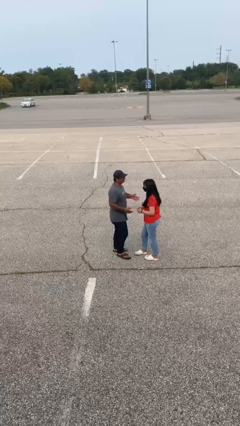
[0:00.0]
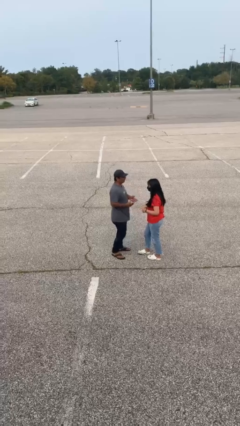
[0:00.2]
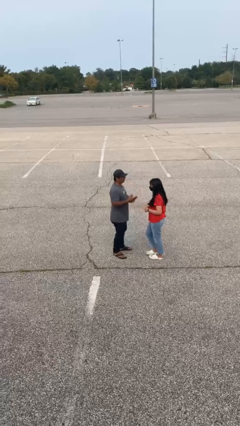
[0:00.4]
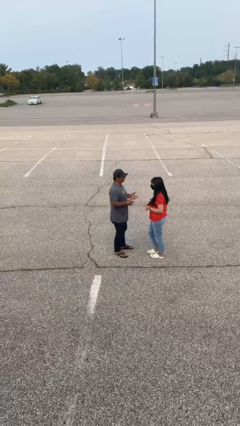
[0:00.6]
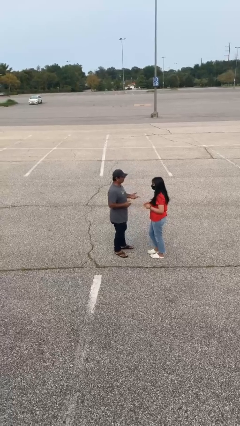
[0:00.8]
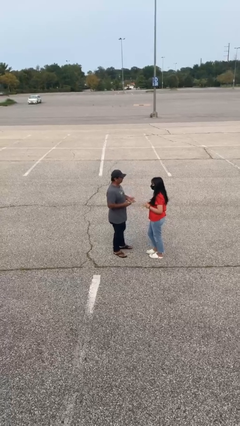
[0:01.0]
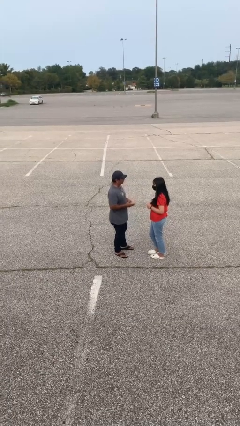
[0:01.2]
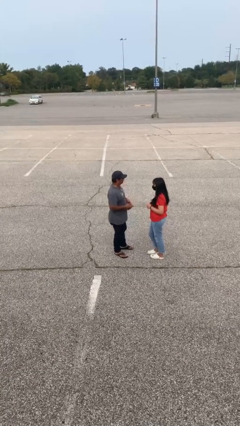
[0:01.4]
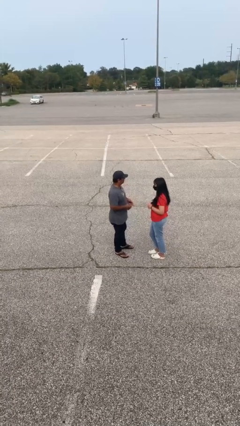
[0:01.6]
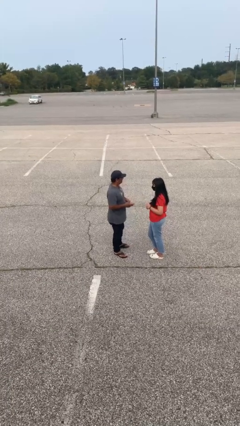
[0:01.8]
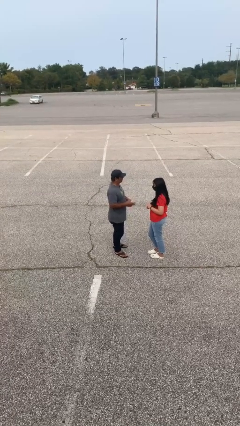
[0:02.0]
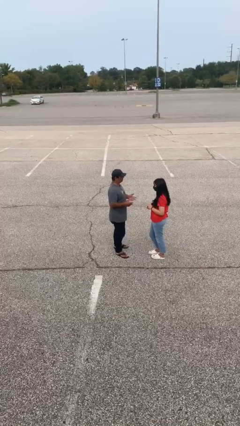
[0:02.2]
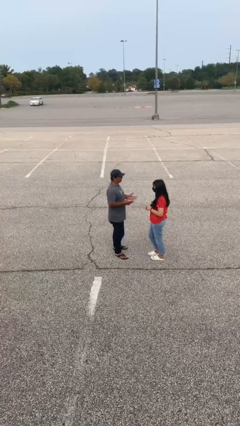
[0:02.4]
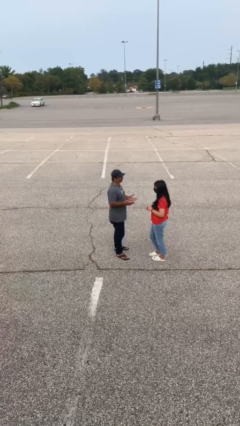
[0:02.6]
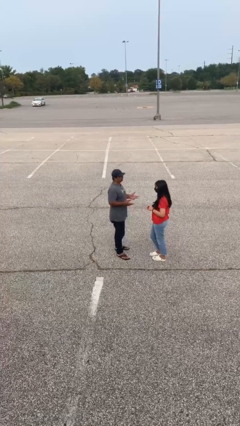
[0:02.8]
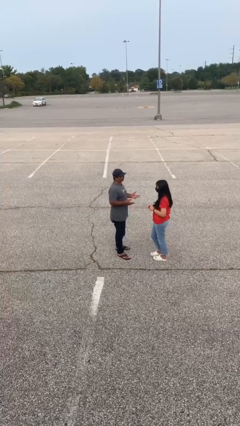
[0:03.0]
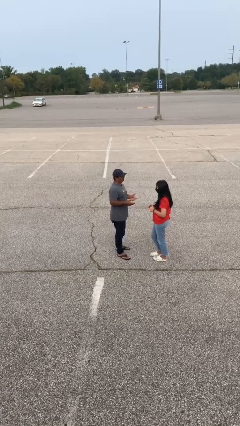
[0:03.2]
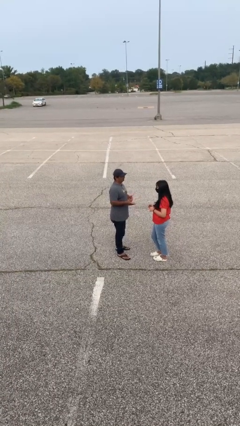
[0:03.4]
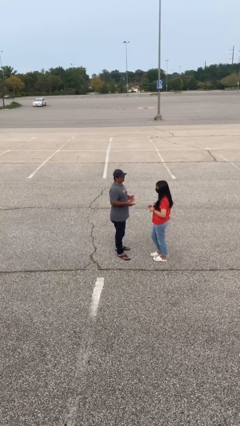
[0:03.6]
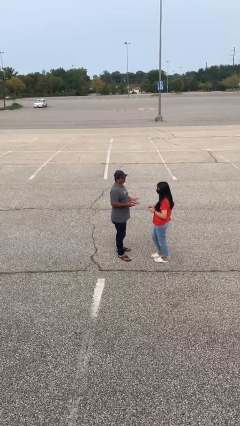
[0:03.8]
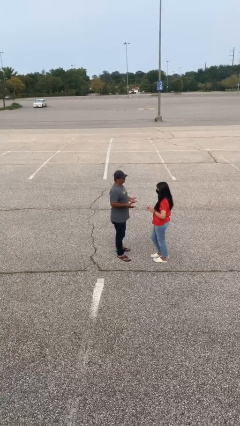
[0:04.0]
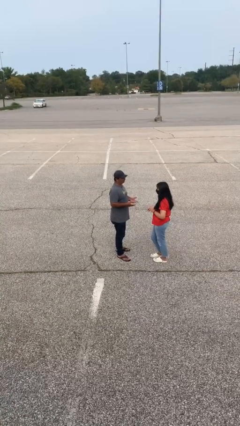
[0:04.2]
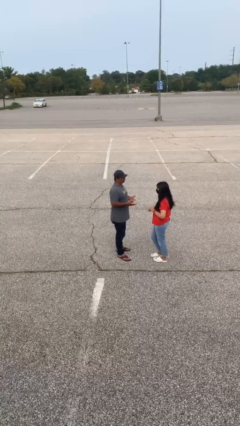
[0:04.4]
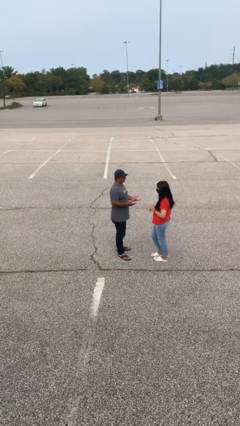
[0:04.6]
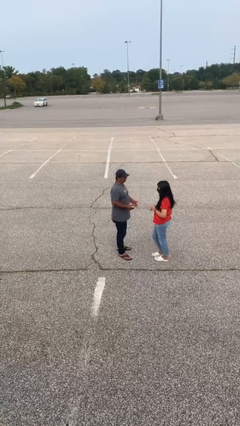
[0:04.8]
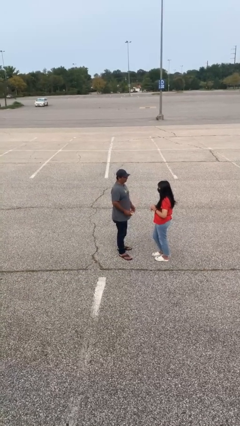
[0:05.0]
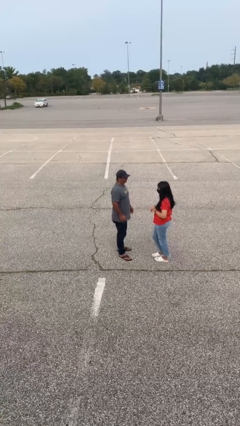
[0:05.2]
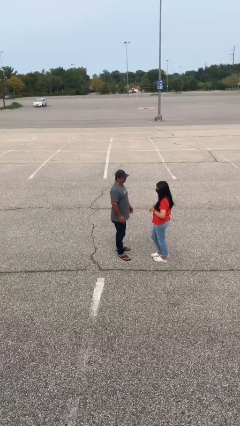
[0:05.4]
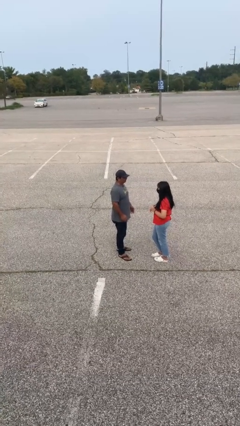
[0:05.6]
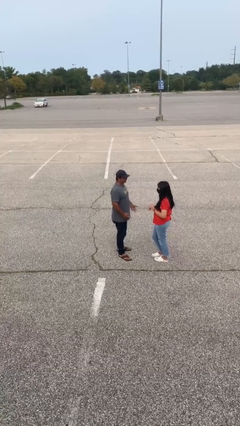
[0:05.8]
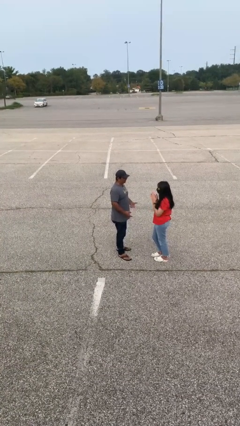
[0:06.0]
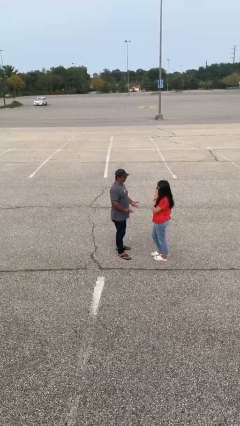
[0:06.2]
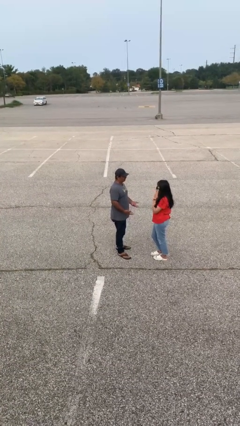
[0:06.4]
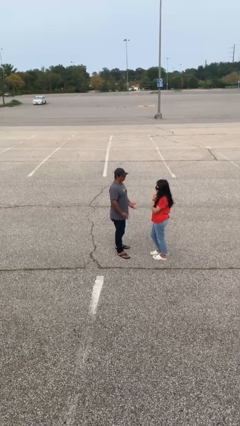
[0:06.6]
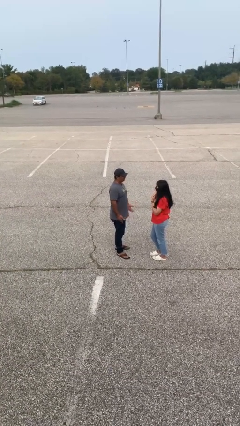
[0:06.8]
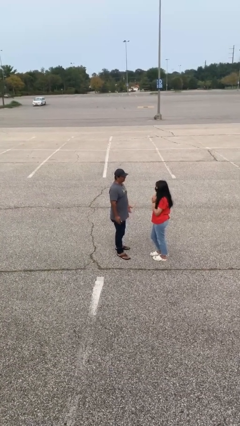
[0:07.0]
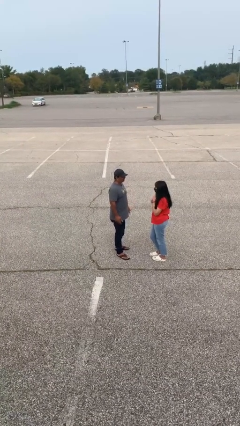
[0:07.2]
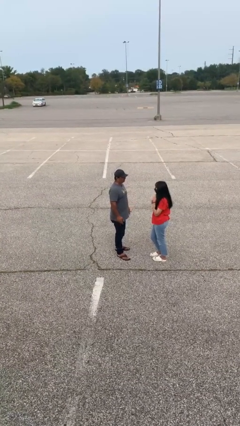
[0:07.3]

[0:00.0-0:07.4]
person talks to person

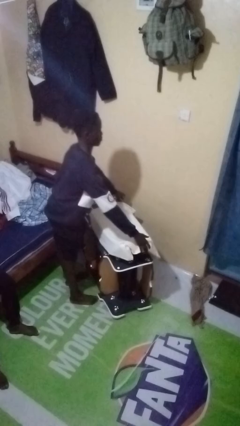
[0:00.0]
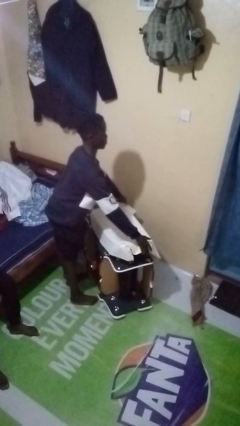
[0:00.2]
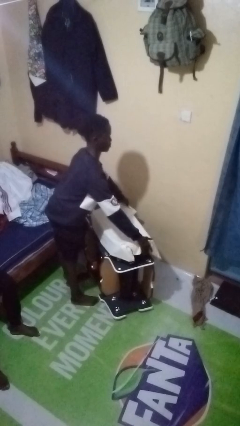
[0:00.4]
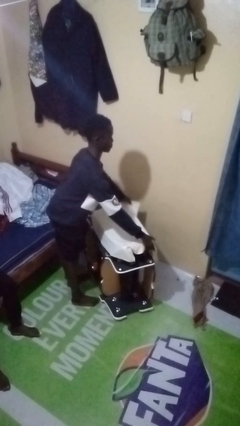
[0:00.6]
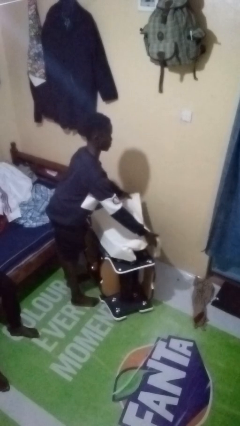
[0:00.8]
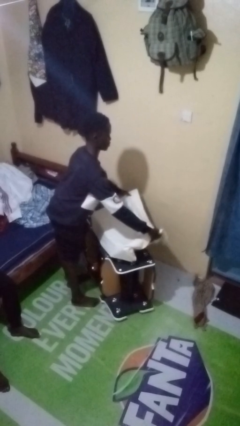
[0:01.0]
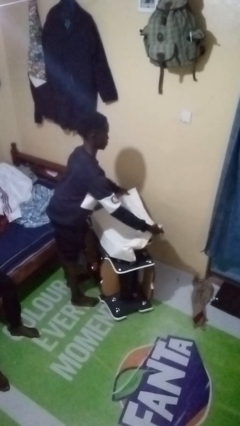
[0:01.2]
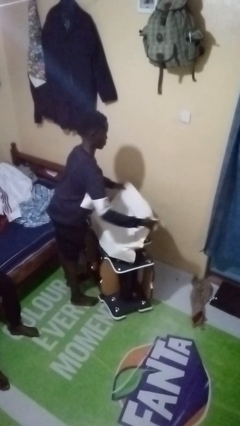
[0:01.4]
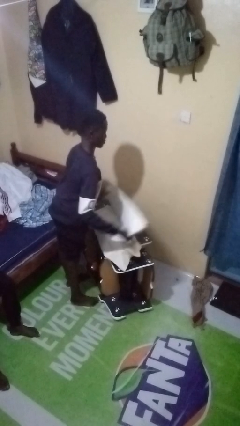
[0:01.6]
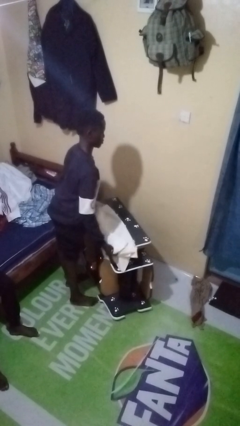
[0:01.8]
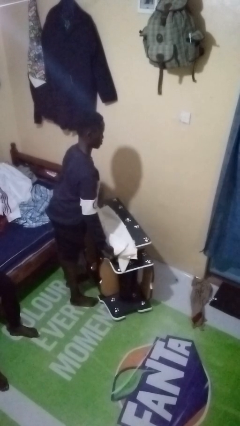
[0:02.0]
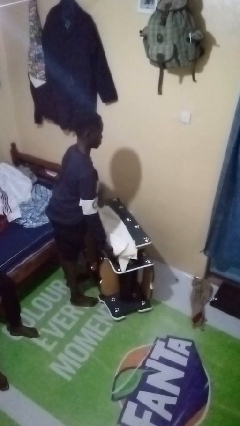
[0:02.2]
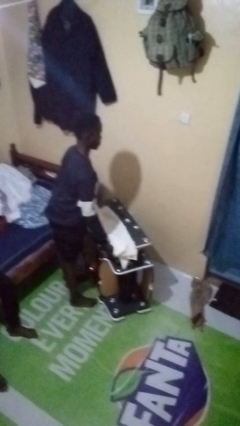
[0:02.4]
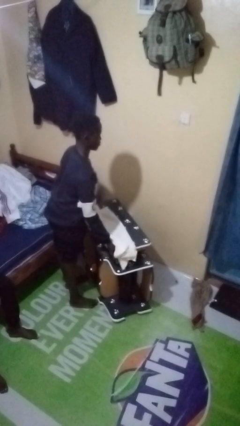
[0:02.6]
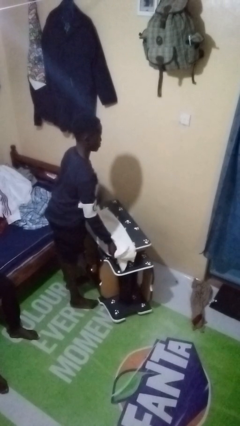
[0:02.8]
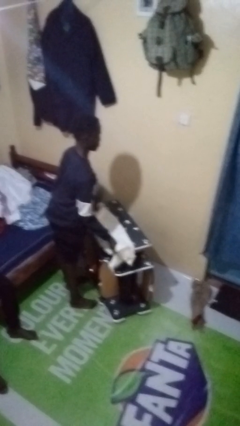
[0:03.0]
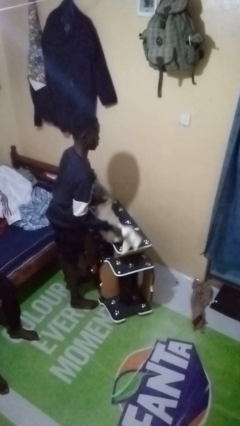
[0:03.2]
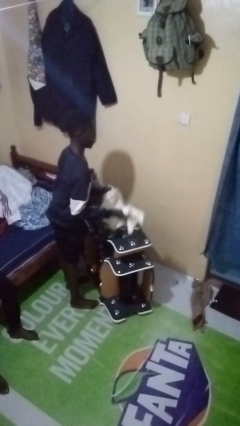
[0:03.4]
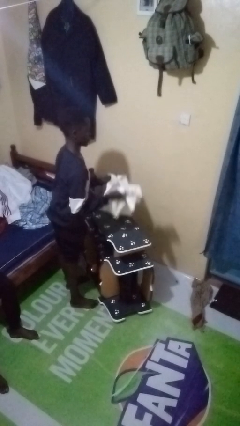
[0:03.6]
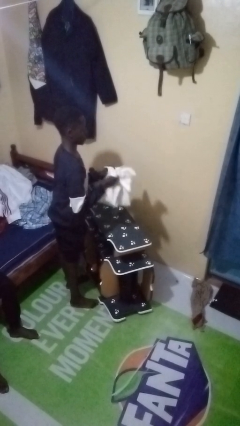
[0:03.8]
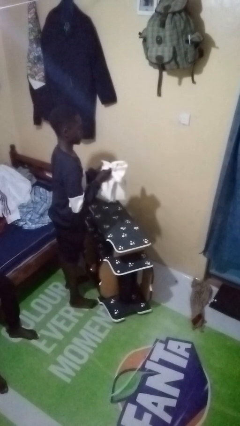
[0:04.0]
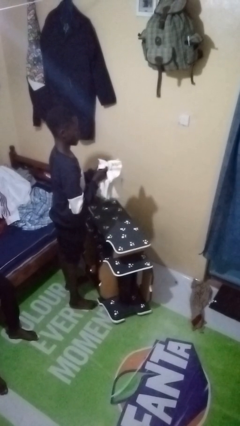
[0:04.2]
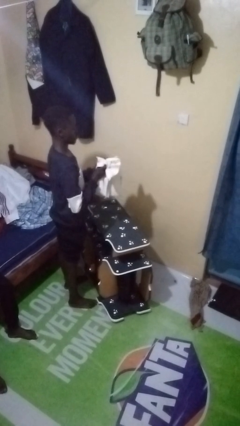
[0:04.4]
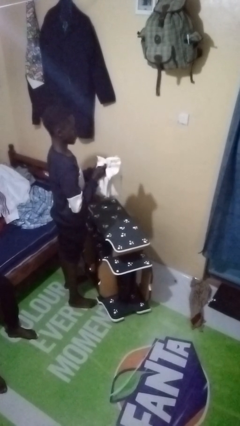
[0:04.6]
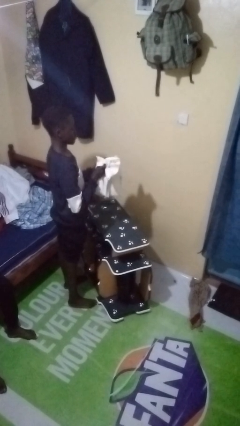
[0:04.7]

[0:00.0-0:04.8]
person folds tablecloth

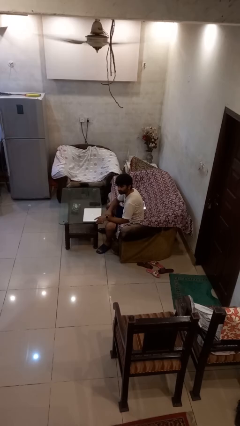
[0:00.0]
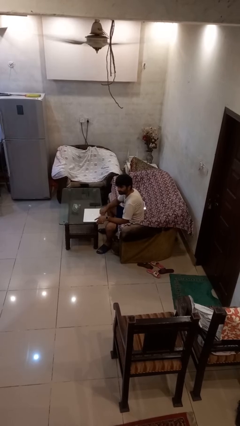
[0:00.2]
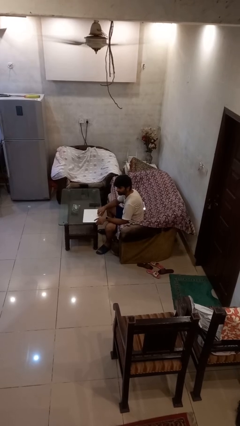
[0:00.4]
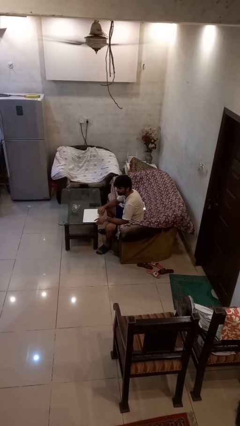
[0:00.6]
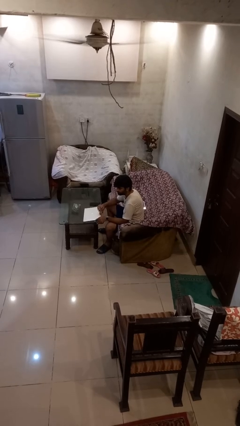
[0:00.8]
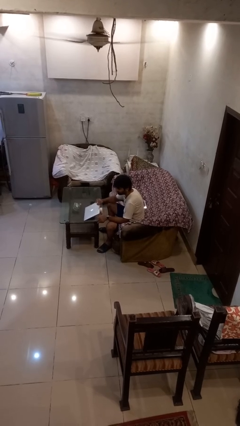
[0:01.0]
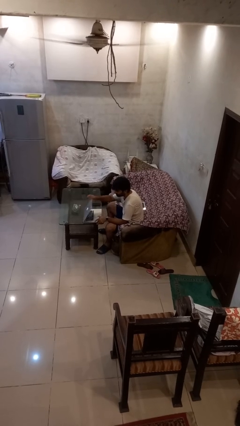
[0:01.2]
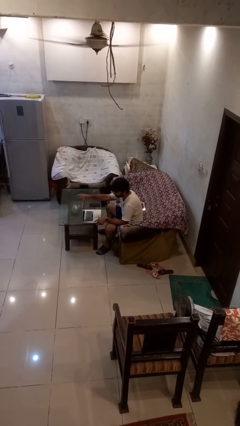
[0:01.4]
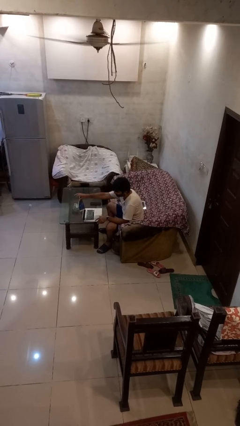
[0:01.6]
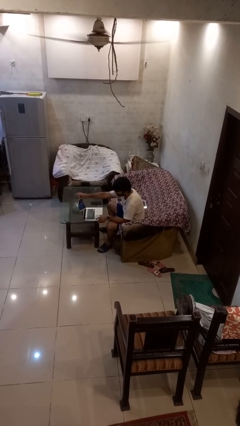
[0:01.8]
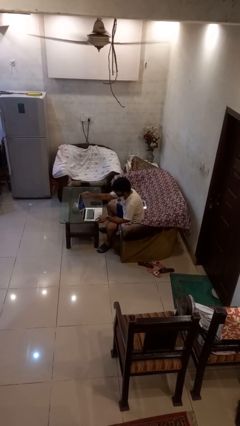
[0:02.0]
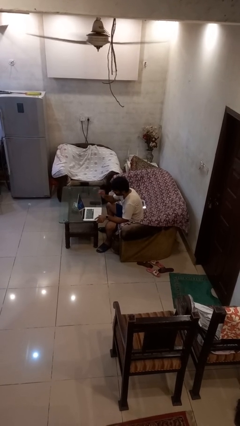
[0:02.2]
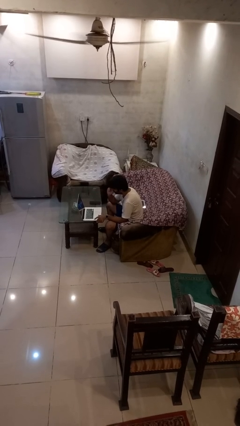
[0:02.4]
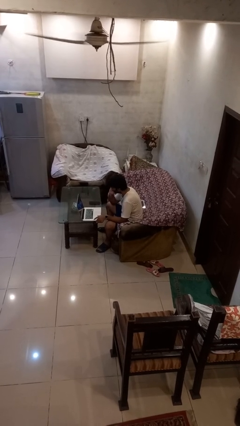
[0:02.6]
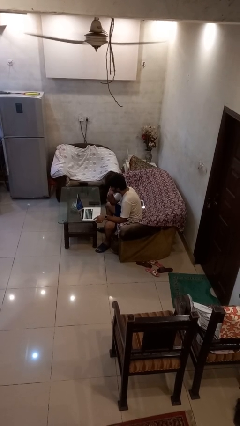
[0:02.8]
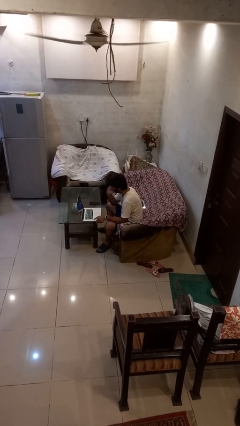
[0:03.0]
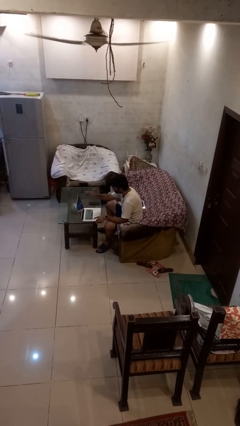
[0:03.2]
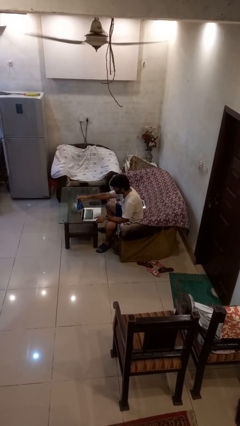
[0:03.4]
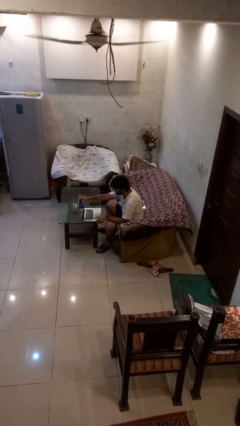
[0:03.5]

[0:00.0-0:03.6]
person opens laptop

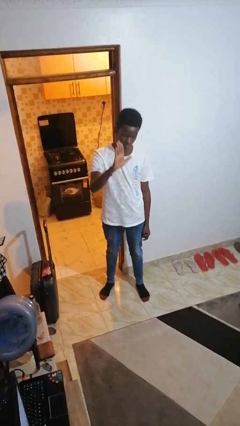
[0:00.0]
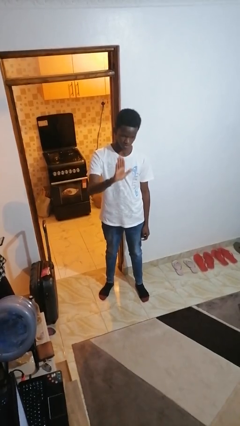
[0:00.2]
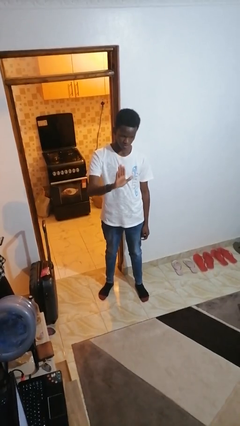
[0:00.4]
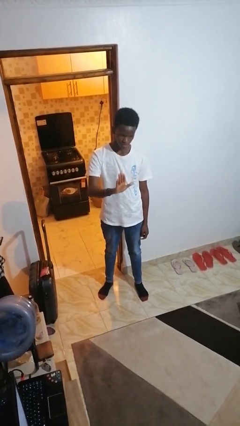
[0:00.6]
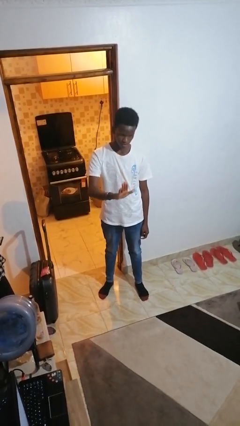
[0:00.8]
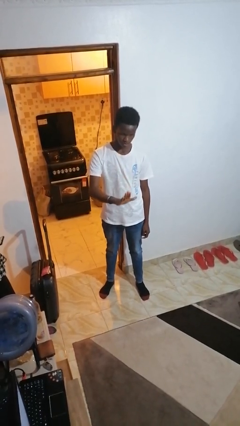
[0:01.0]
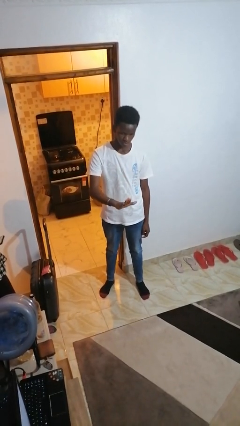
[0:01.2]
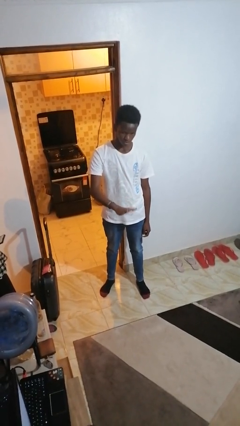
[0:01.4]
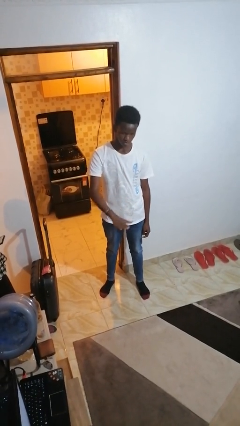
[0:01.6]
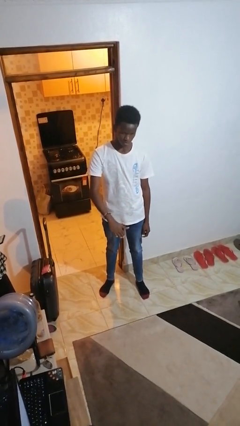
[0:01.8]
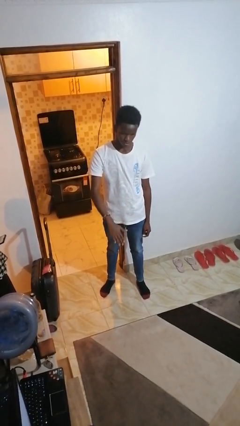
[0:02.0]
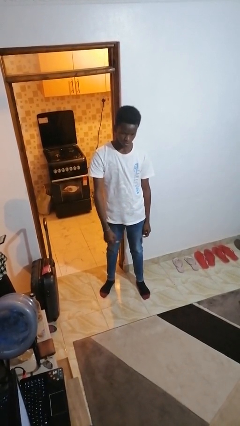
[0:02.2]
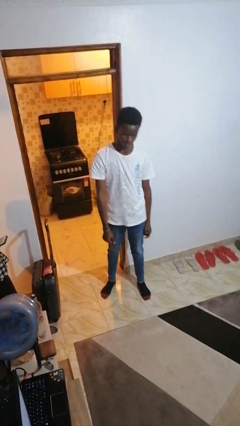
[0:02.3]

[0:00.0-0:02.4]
person gestures swipe down
